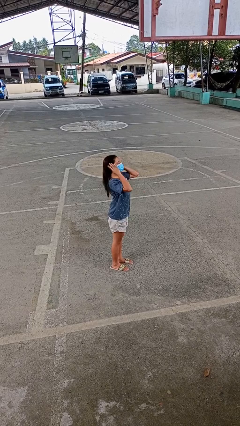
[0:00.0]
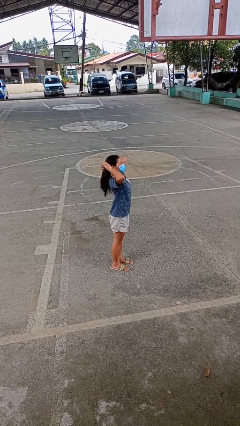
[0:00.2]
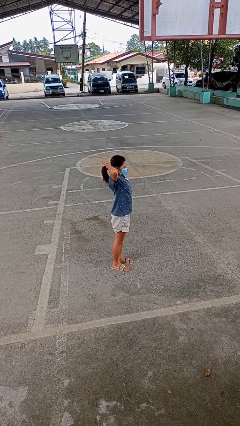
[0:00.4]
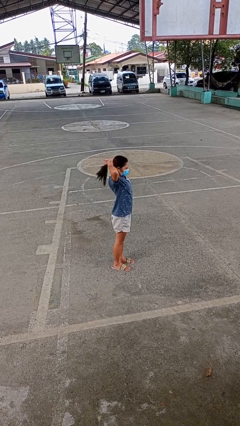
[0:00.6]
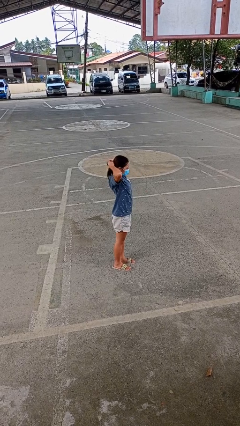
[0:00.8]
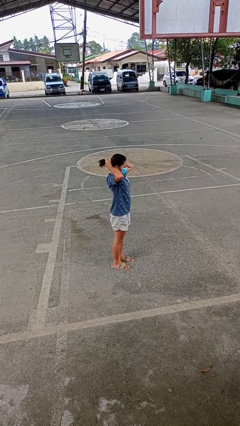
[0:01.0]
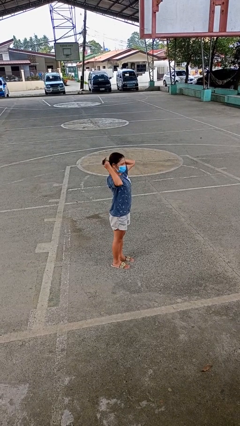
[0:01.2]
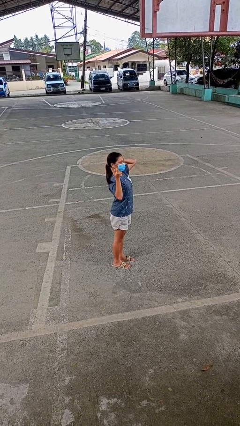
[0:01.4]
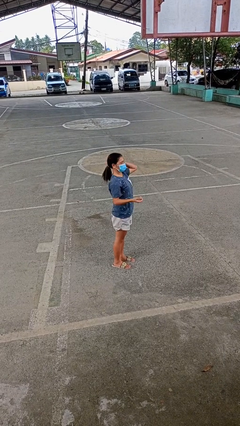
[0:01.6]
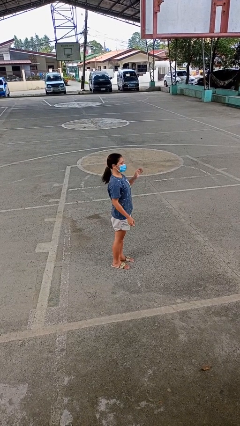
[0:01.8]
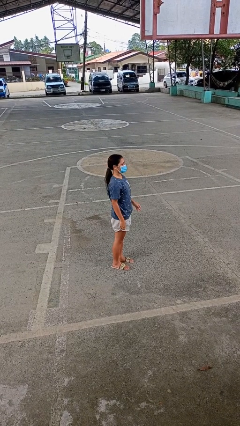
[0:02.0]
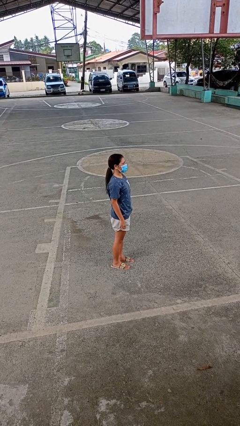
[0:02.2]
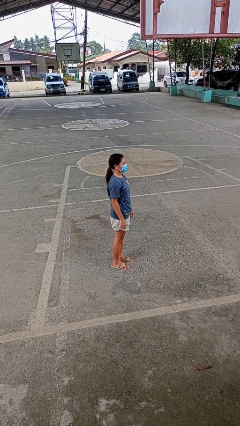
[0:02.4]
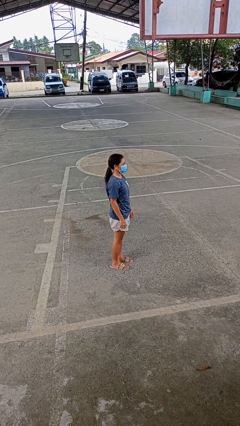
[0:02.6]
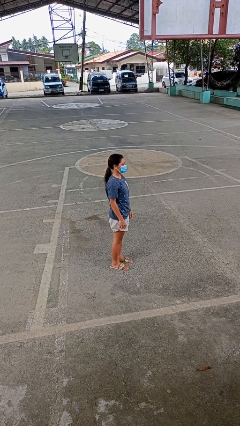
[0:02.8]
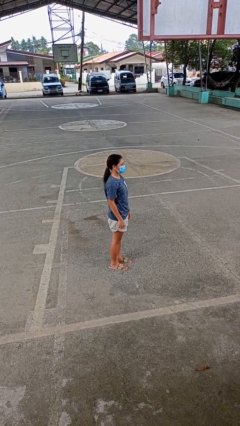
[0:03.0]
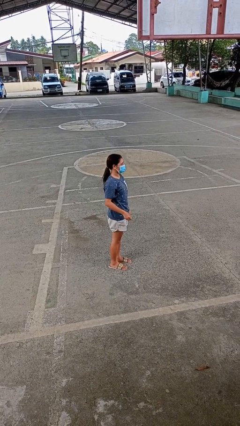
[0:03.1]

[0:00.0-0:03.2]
person puts hair in ponytail

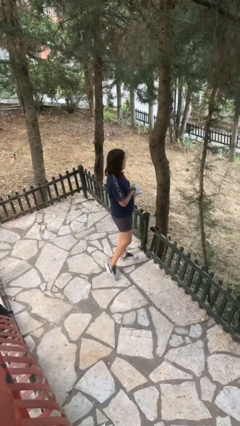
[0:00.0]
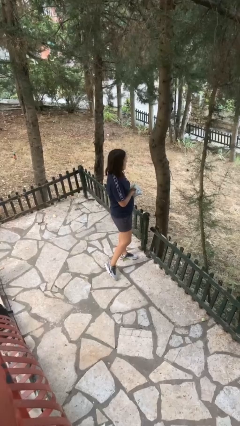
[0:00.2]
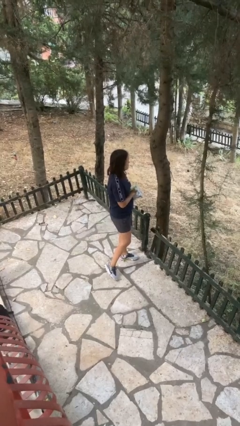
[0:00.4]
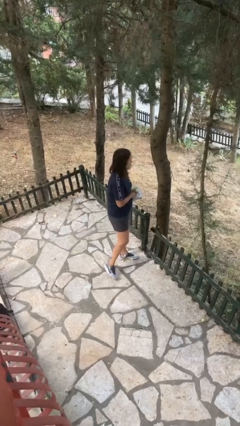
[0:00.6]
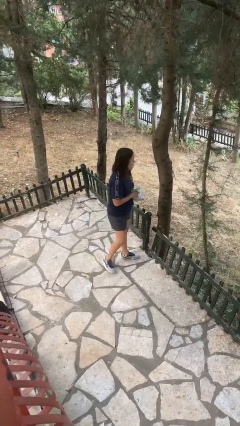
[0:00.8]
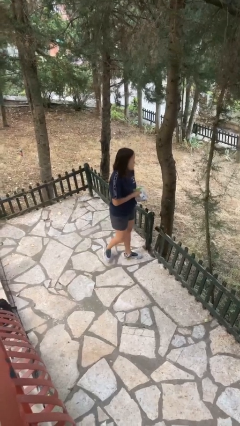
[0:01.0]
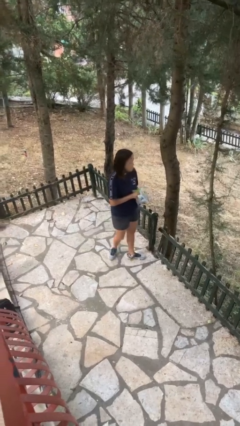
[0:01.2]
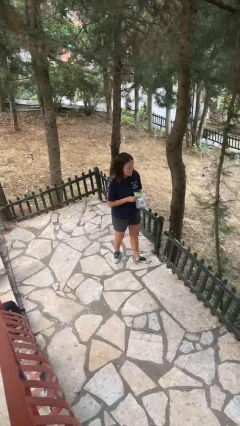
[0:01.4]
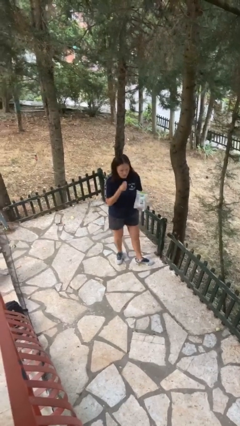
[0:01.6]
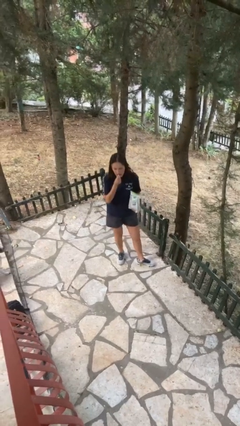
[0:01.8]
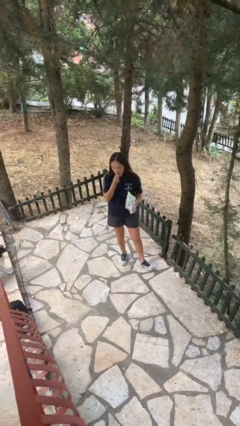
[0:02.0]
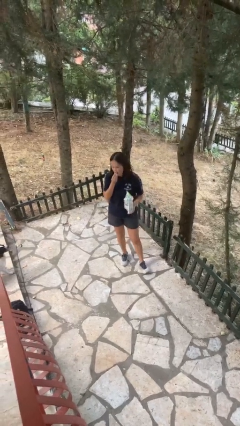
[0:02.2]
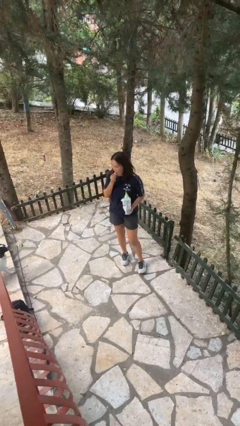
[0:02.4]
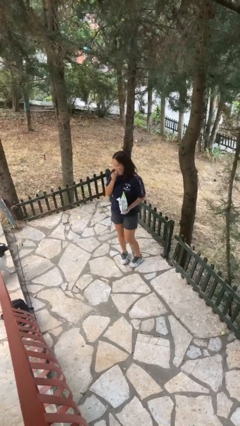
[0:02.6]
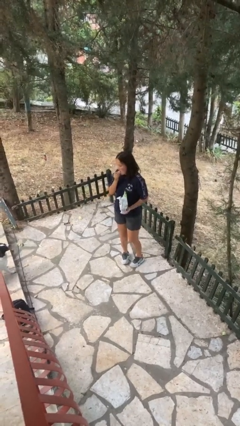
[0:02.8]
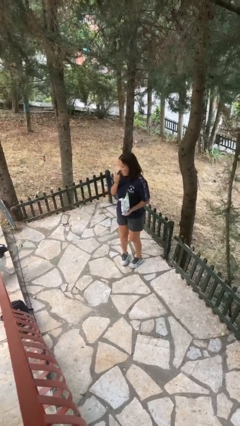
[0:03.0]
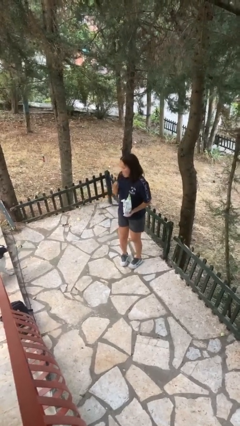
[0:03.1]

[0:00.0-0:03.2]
person eats snack from bag

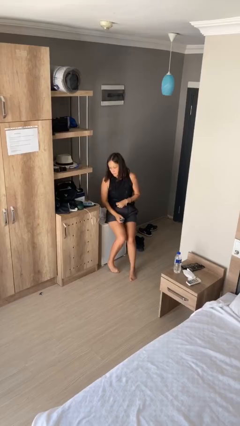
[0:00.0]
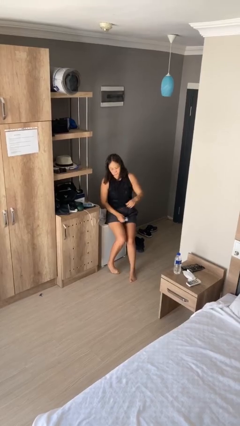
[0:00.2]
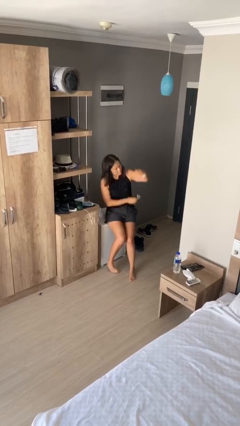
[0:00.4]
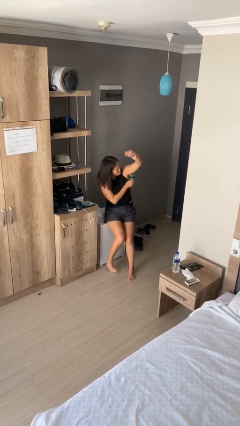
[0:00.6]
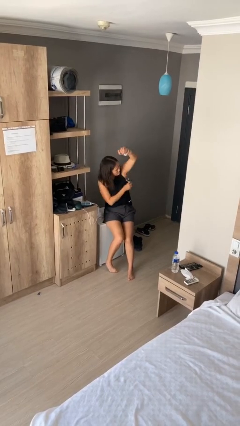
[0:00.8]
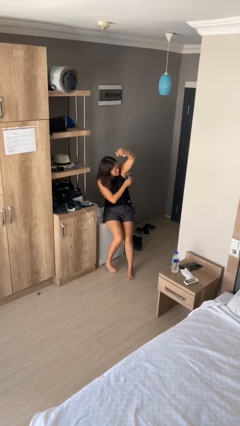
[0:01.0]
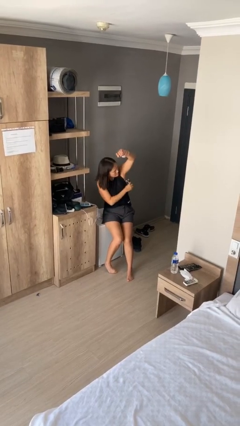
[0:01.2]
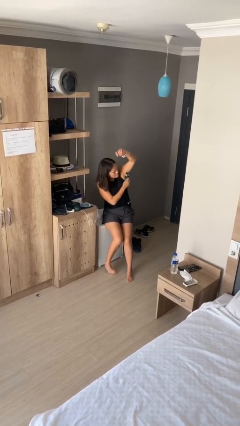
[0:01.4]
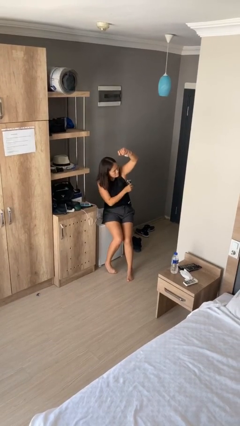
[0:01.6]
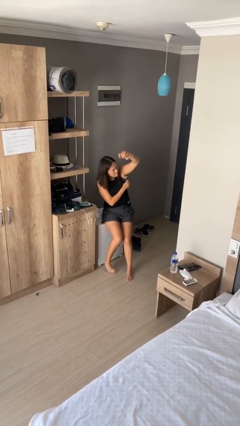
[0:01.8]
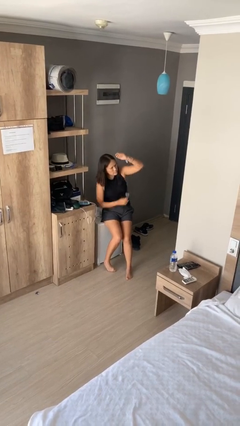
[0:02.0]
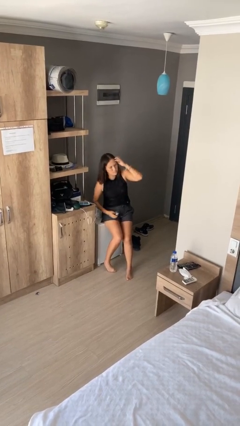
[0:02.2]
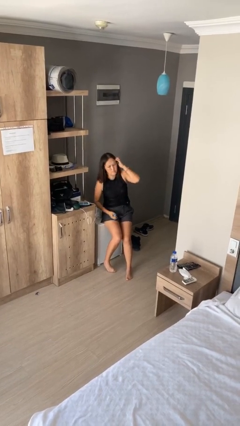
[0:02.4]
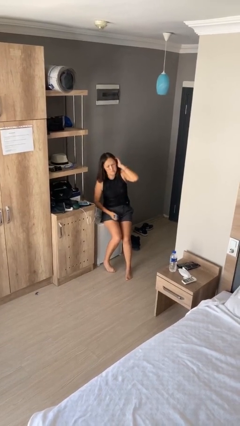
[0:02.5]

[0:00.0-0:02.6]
person applies deodorant

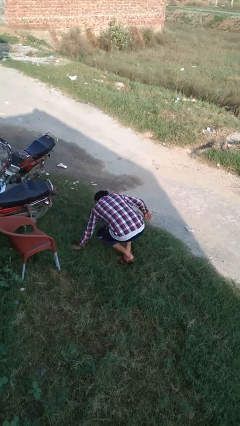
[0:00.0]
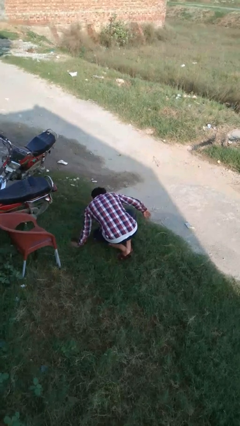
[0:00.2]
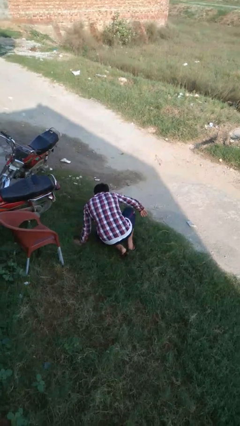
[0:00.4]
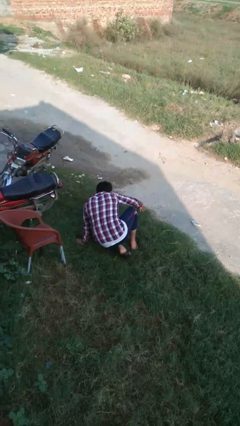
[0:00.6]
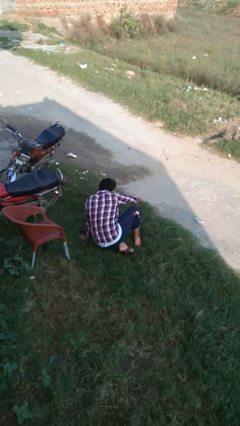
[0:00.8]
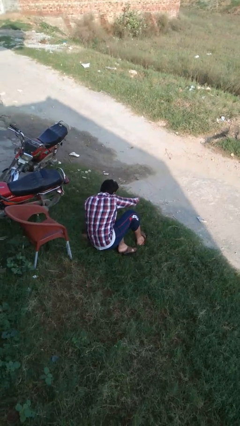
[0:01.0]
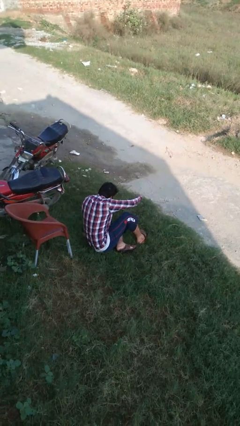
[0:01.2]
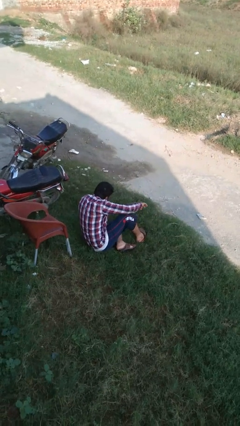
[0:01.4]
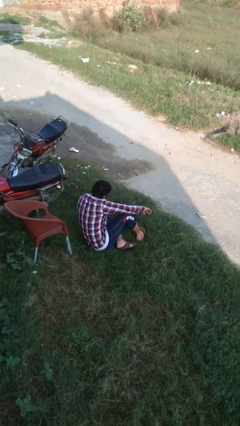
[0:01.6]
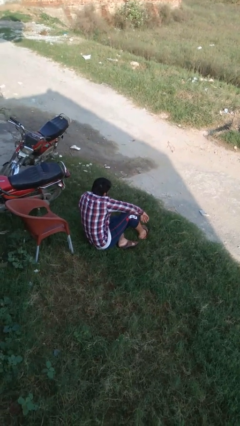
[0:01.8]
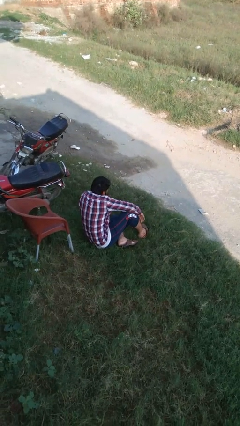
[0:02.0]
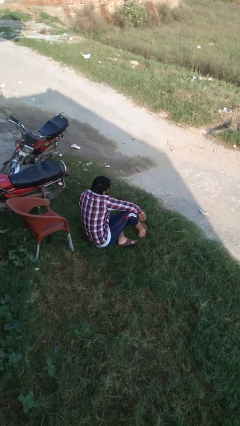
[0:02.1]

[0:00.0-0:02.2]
person lies down on floor

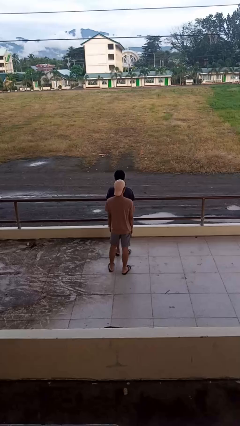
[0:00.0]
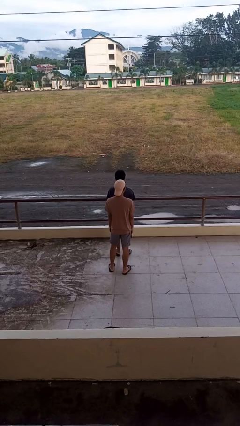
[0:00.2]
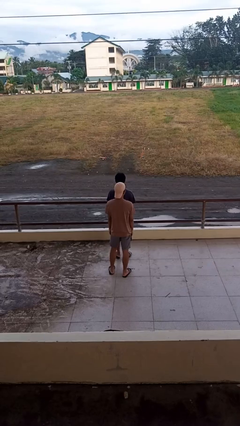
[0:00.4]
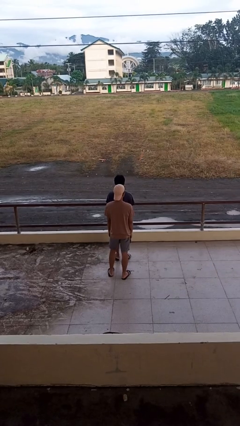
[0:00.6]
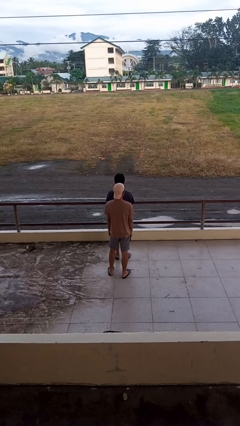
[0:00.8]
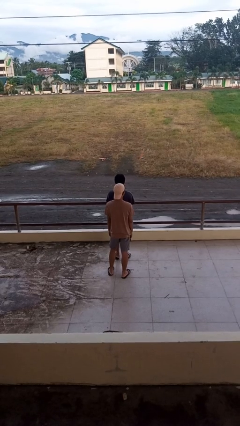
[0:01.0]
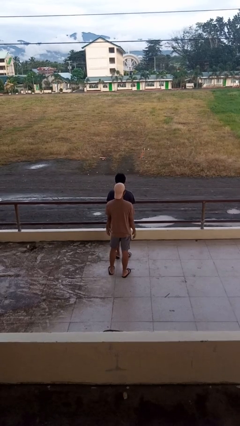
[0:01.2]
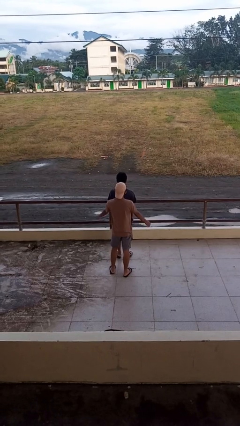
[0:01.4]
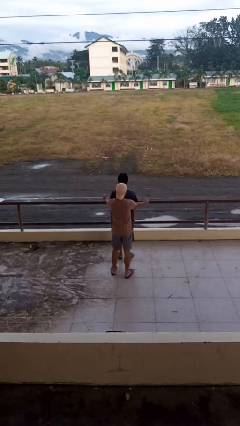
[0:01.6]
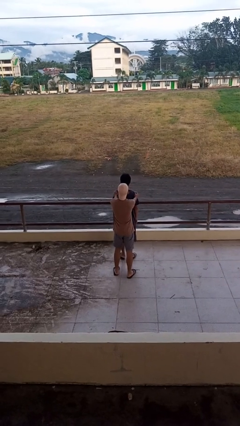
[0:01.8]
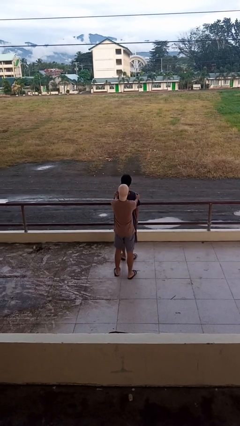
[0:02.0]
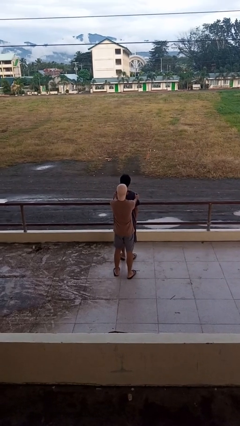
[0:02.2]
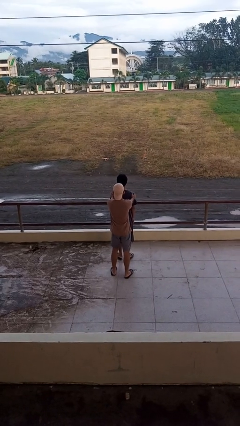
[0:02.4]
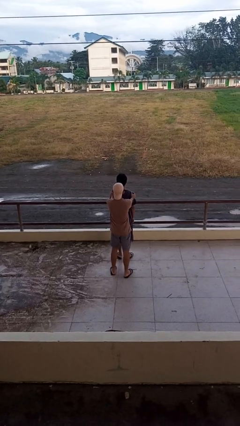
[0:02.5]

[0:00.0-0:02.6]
person pounds shoulders of person

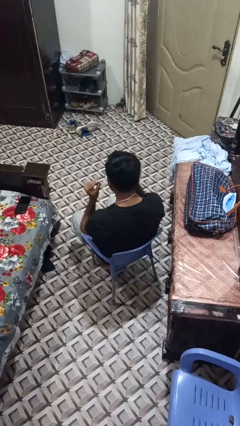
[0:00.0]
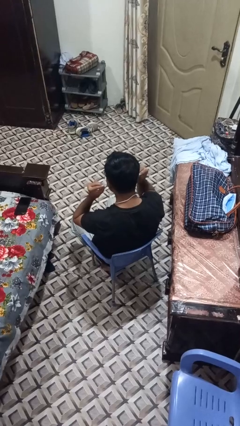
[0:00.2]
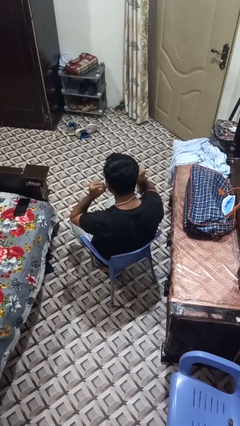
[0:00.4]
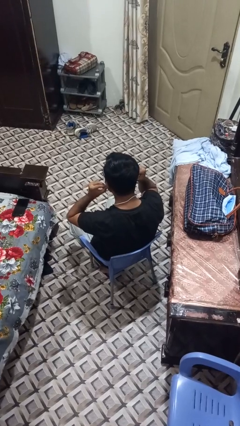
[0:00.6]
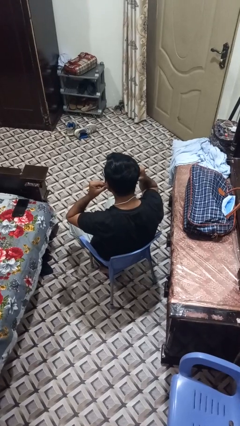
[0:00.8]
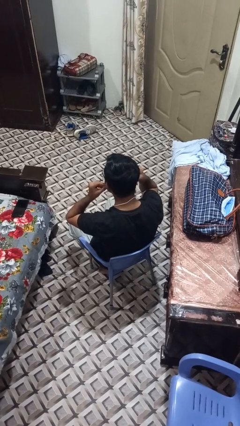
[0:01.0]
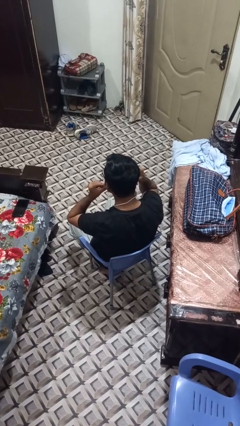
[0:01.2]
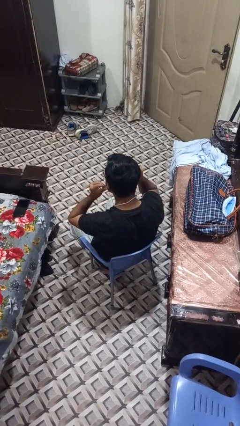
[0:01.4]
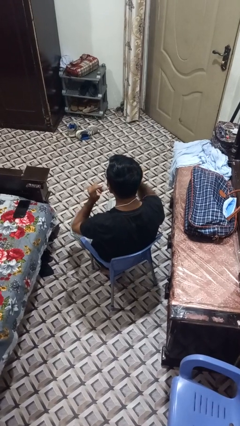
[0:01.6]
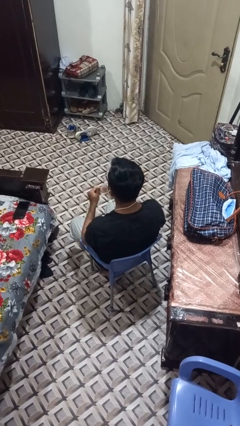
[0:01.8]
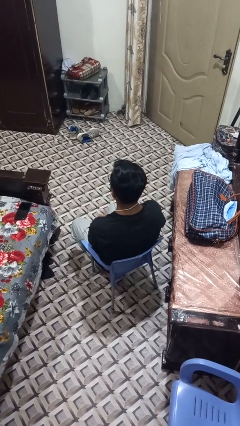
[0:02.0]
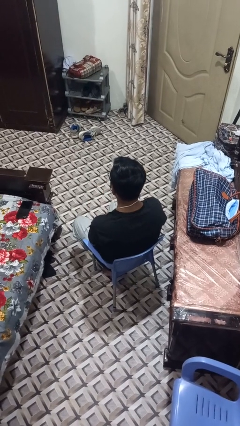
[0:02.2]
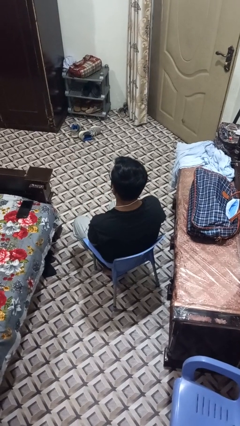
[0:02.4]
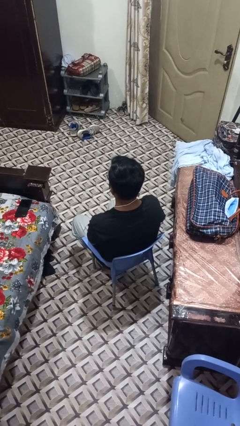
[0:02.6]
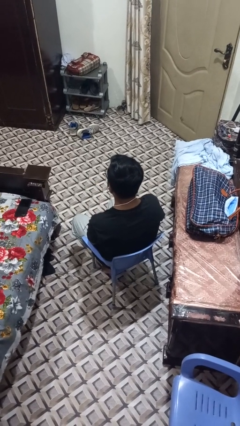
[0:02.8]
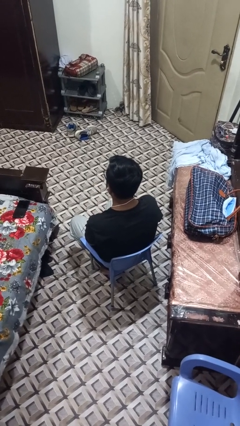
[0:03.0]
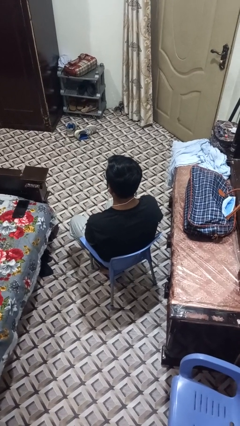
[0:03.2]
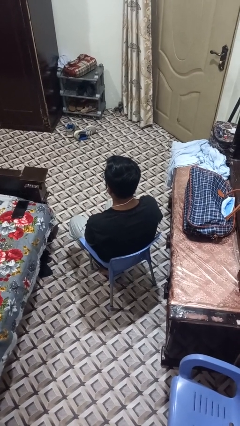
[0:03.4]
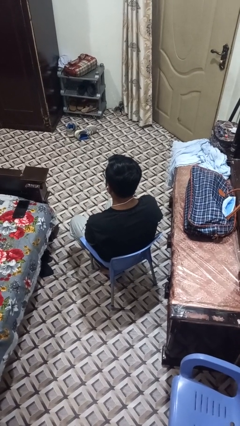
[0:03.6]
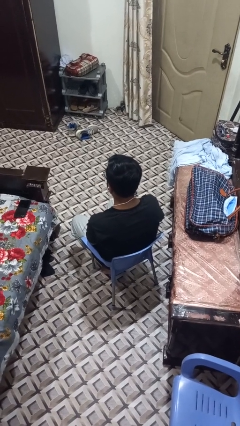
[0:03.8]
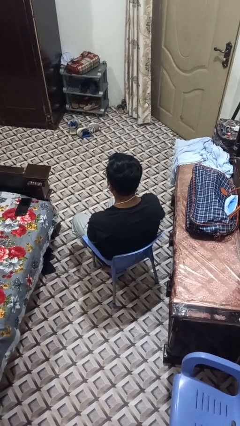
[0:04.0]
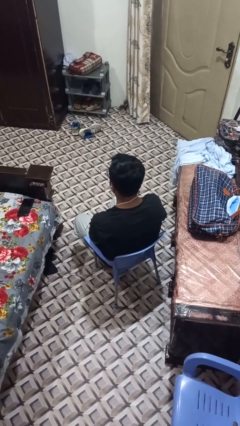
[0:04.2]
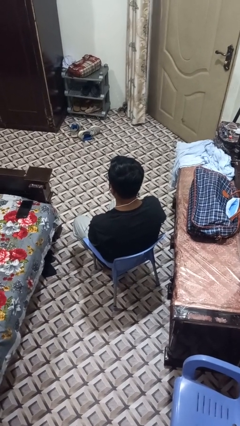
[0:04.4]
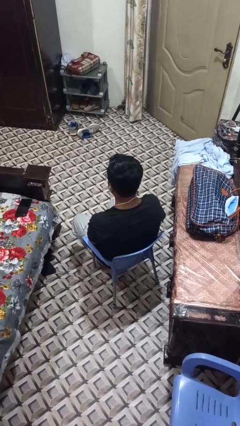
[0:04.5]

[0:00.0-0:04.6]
person puts on headphones
